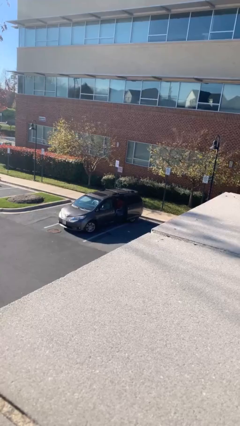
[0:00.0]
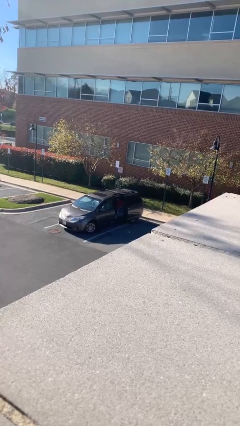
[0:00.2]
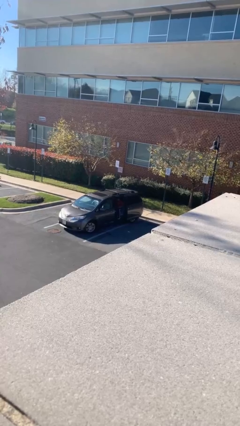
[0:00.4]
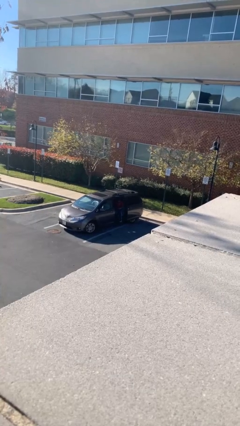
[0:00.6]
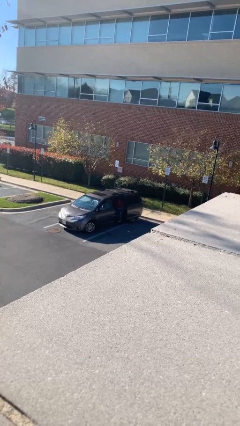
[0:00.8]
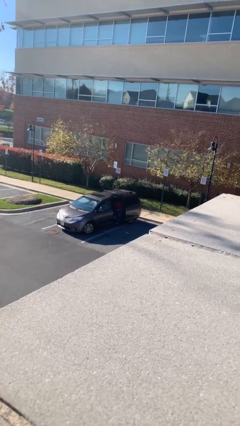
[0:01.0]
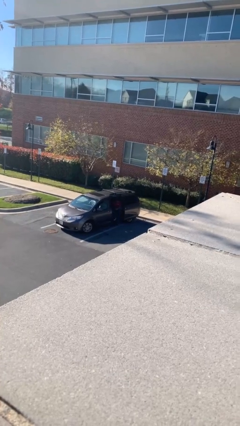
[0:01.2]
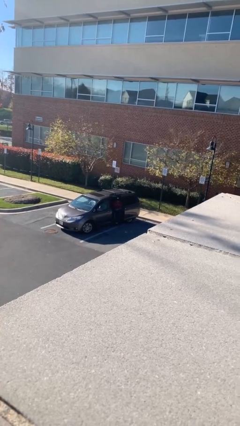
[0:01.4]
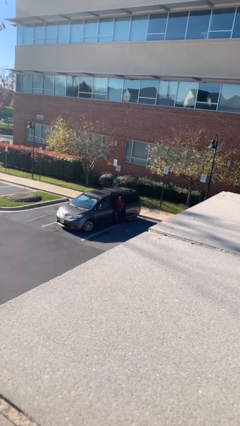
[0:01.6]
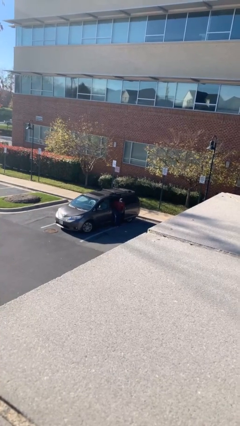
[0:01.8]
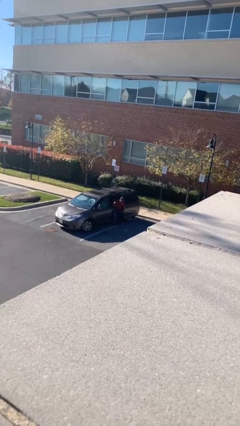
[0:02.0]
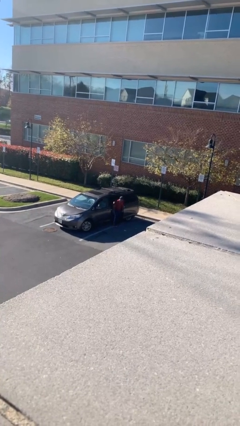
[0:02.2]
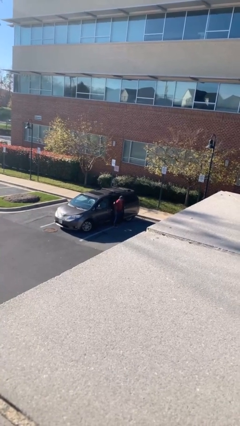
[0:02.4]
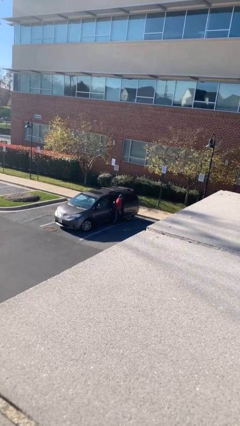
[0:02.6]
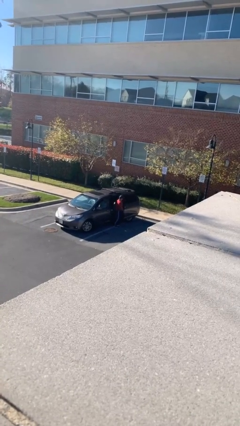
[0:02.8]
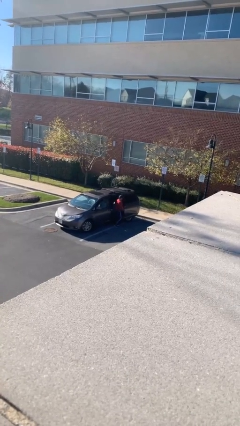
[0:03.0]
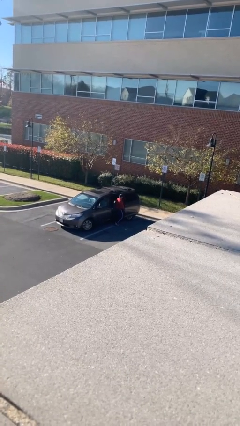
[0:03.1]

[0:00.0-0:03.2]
person exits car

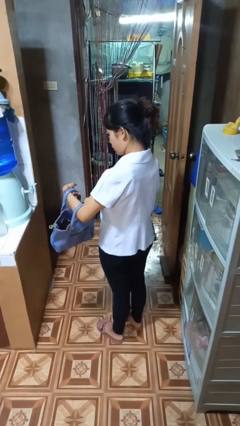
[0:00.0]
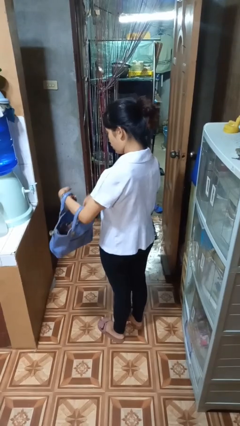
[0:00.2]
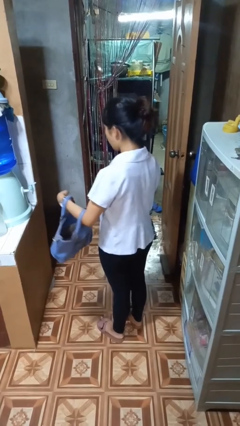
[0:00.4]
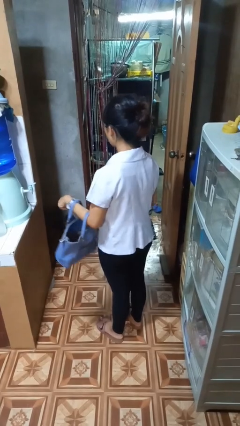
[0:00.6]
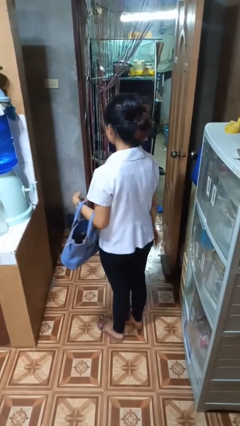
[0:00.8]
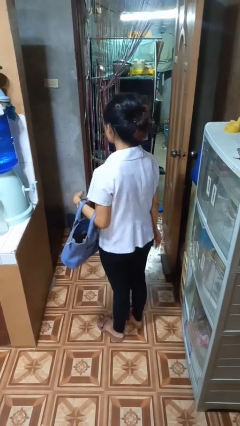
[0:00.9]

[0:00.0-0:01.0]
person puts object into purse

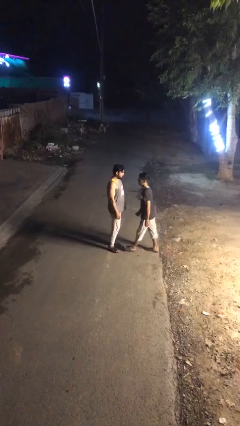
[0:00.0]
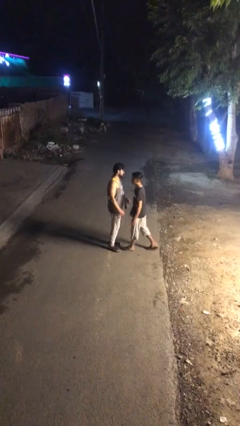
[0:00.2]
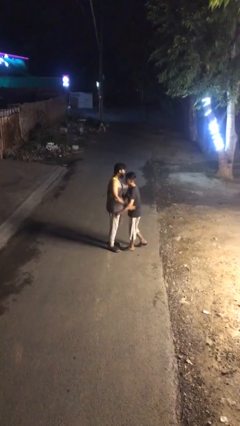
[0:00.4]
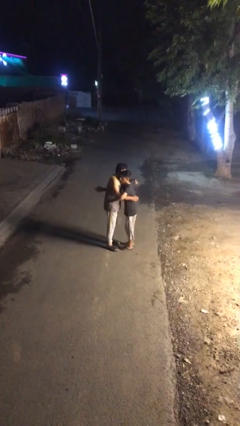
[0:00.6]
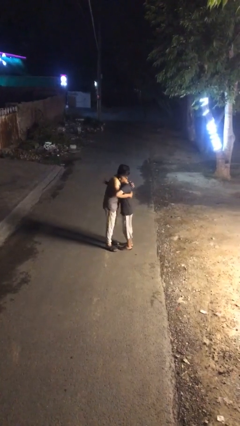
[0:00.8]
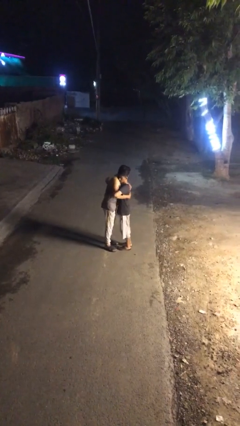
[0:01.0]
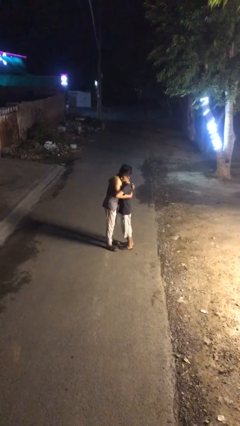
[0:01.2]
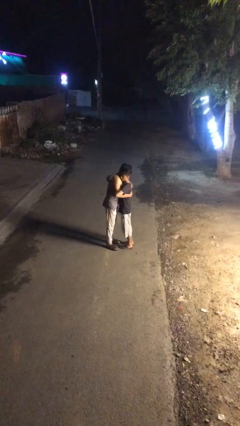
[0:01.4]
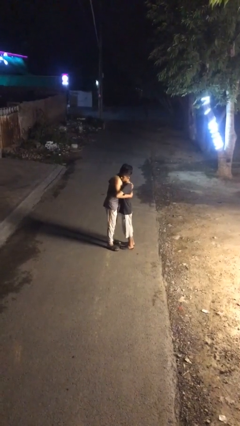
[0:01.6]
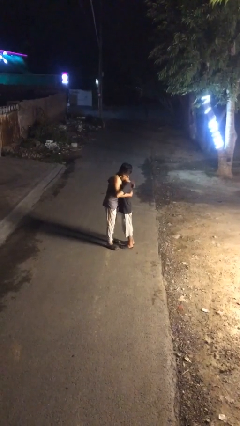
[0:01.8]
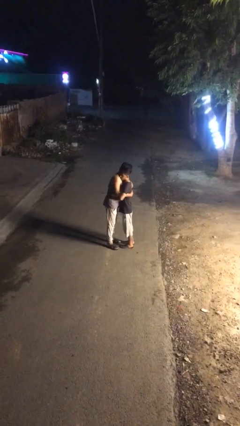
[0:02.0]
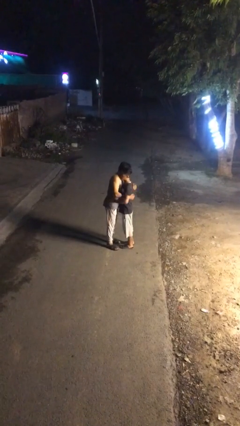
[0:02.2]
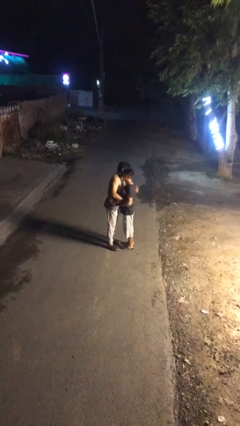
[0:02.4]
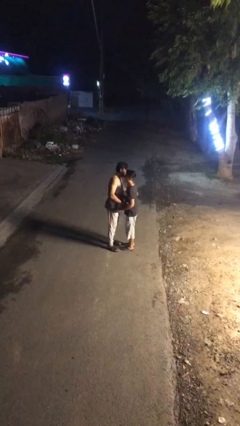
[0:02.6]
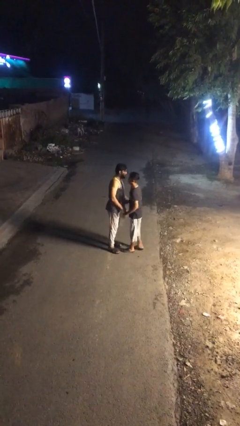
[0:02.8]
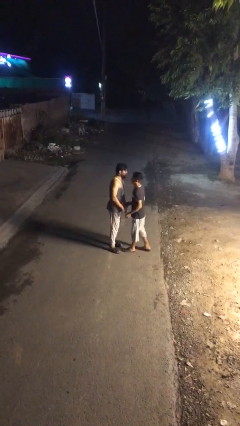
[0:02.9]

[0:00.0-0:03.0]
person embraces person

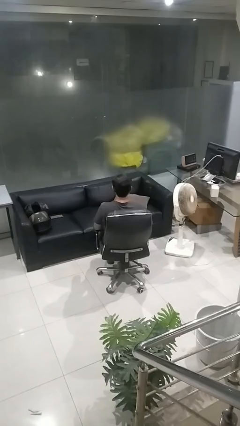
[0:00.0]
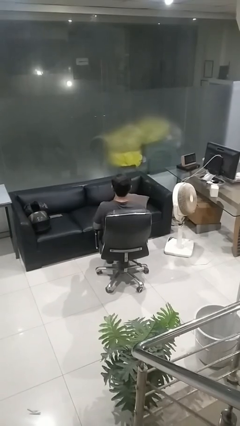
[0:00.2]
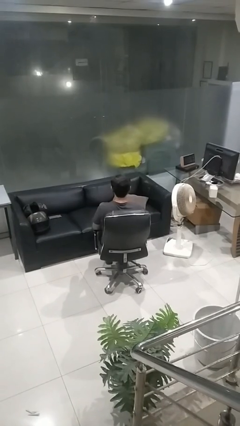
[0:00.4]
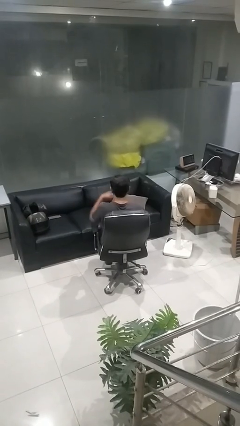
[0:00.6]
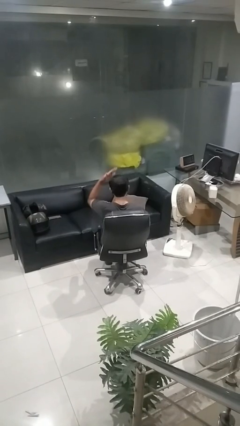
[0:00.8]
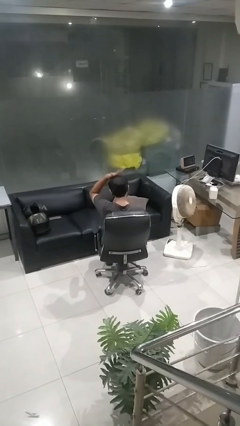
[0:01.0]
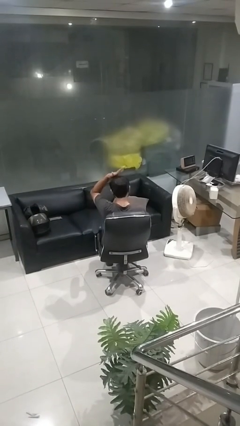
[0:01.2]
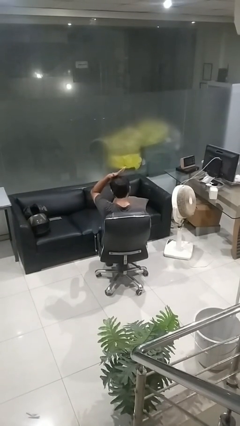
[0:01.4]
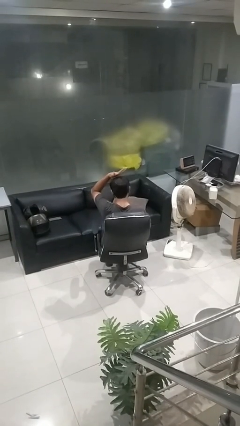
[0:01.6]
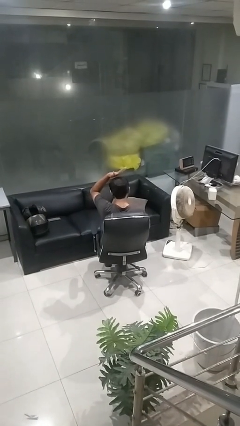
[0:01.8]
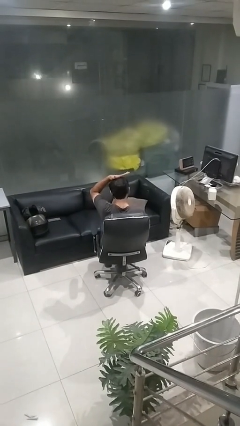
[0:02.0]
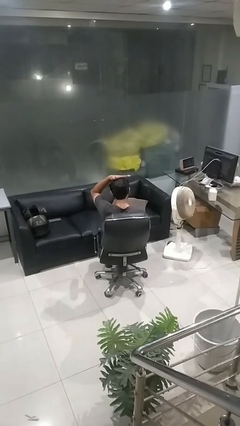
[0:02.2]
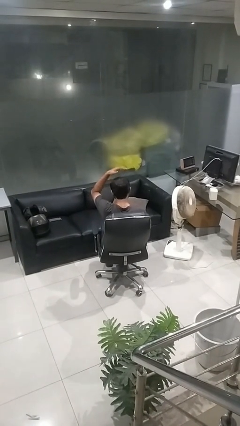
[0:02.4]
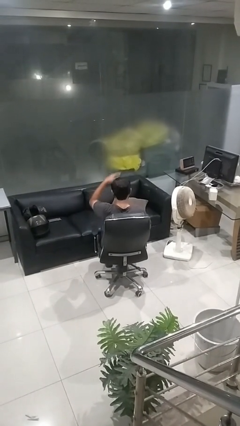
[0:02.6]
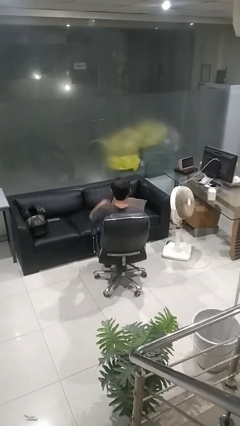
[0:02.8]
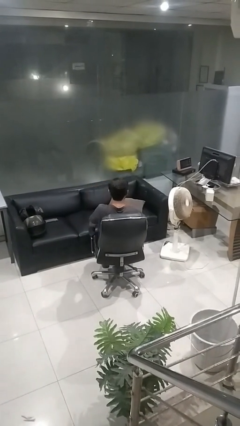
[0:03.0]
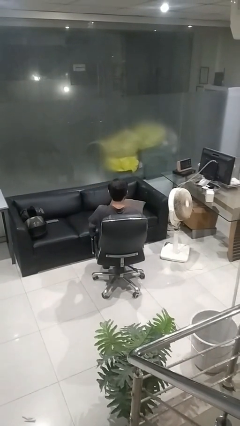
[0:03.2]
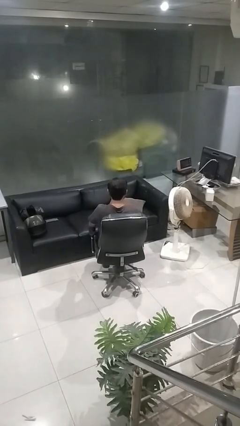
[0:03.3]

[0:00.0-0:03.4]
person pats head

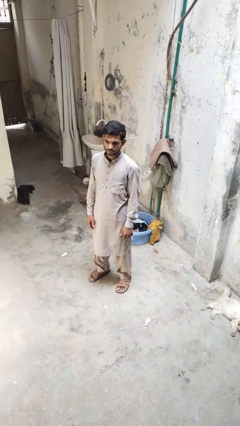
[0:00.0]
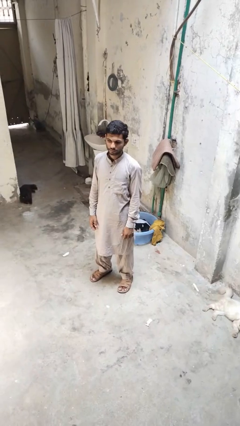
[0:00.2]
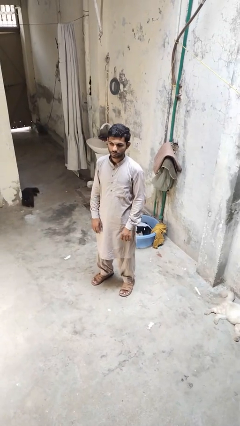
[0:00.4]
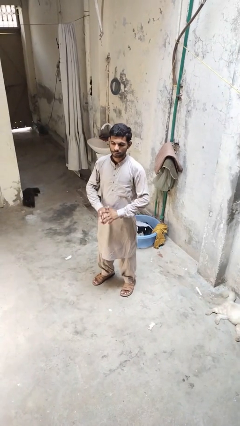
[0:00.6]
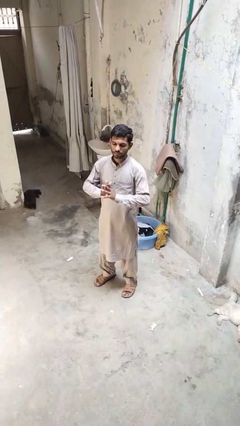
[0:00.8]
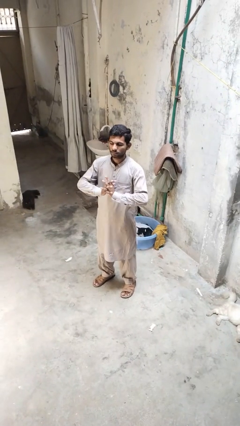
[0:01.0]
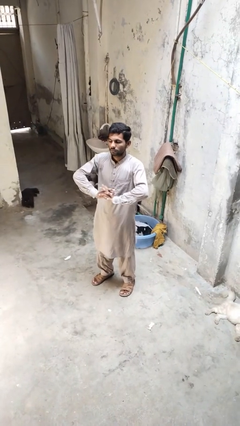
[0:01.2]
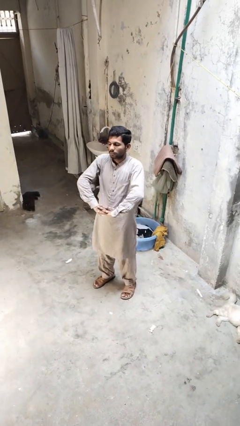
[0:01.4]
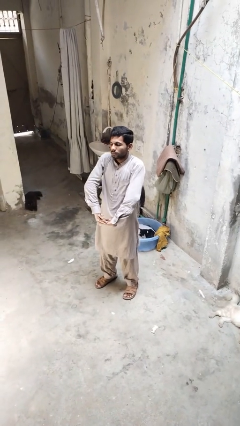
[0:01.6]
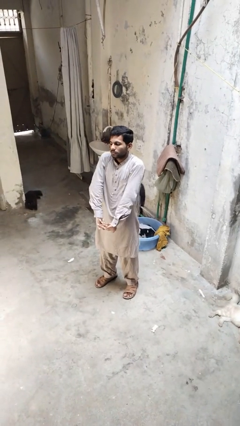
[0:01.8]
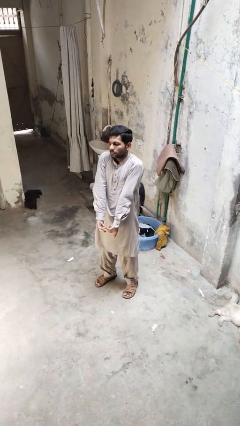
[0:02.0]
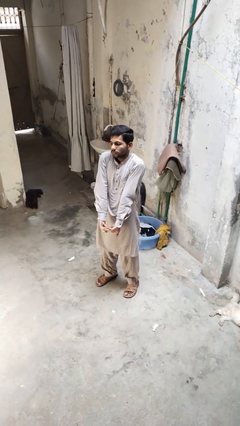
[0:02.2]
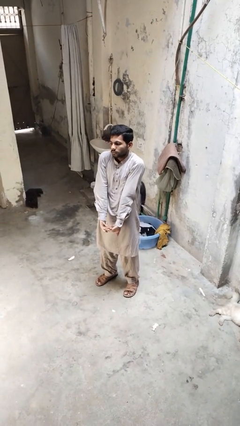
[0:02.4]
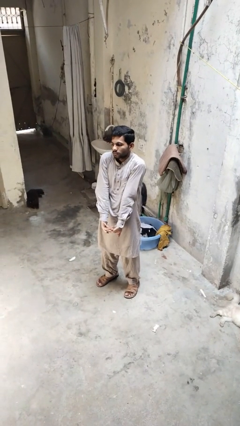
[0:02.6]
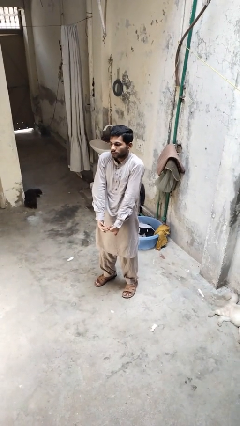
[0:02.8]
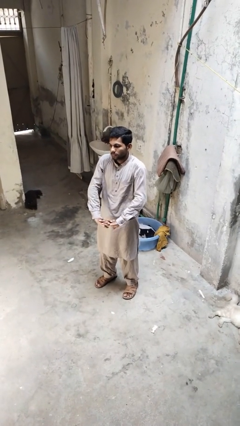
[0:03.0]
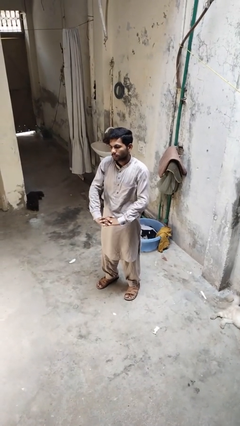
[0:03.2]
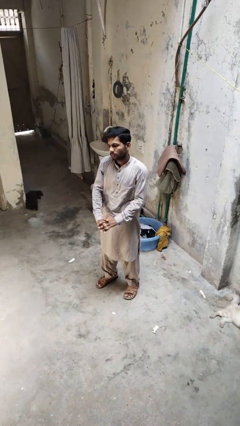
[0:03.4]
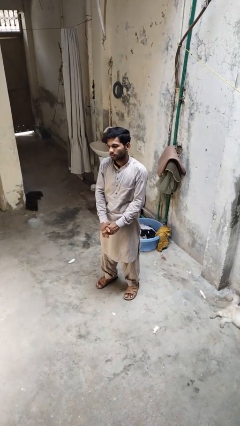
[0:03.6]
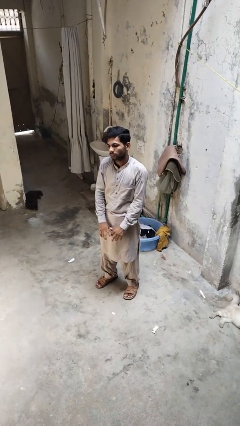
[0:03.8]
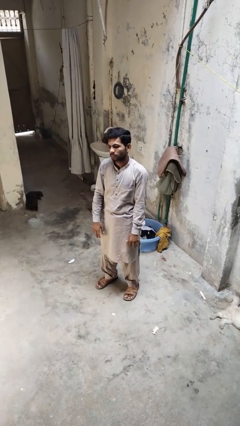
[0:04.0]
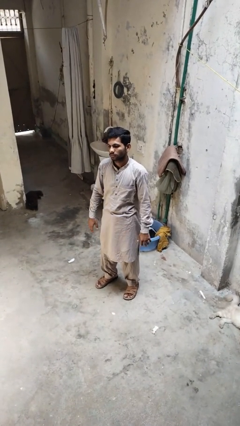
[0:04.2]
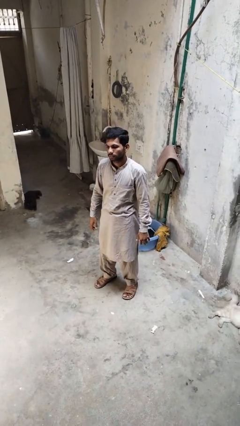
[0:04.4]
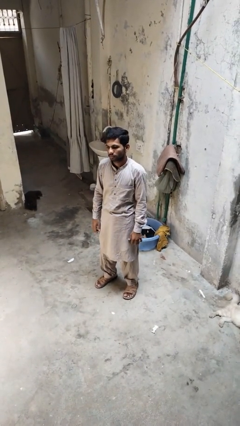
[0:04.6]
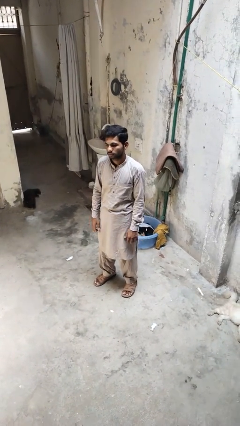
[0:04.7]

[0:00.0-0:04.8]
person cracks knuckles

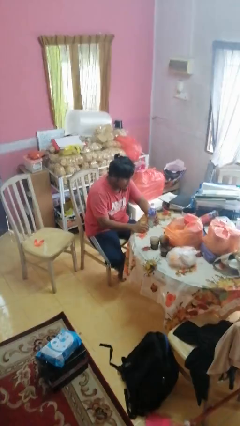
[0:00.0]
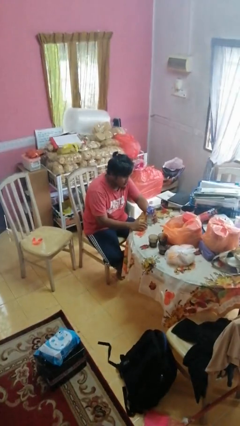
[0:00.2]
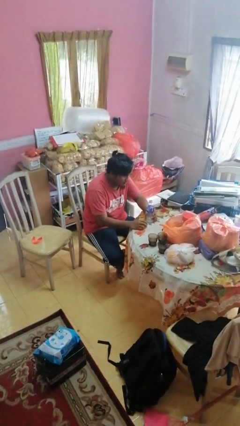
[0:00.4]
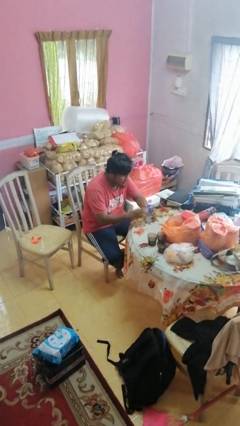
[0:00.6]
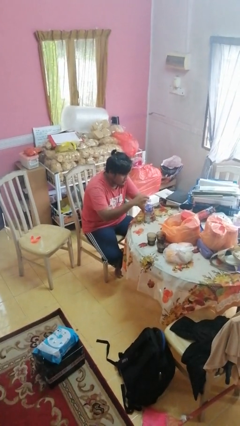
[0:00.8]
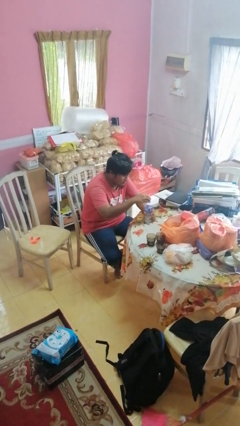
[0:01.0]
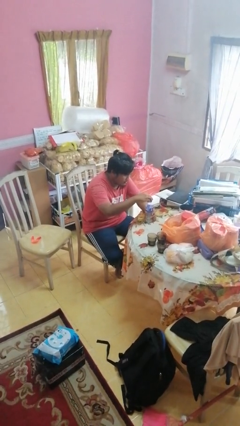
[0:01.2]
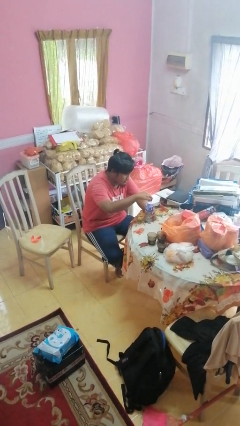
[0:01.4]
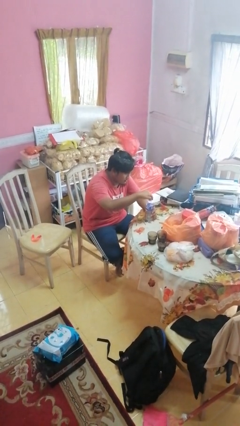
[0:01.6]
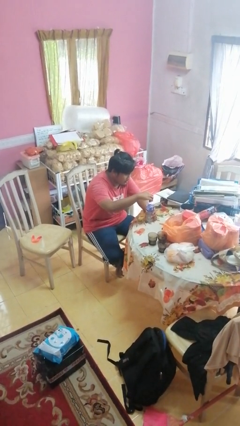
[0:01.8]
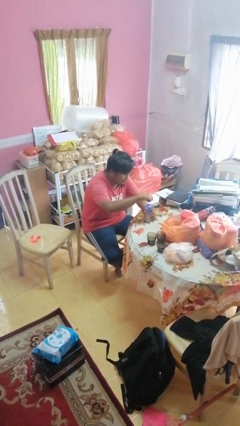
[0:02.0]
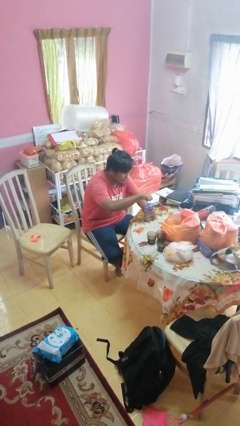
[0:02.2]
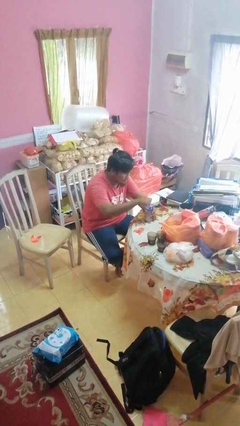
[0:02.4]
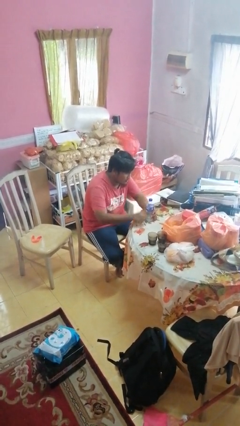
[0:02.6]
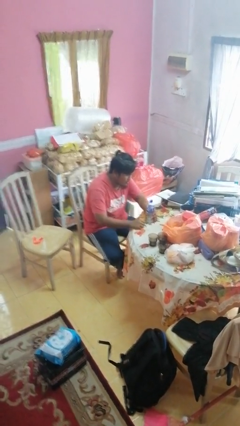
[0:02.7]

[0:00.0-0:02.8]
person screws lid to bottle
